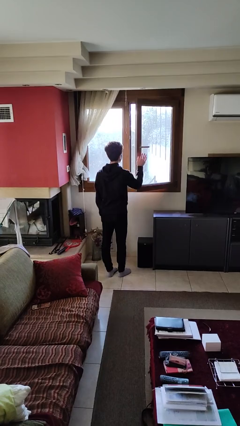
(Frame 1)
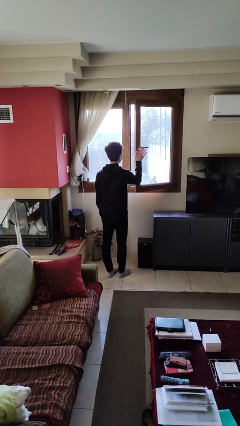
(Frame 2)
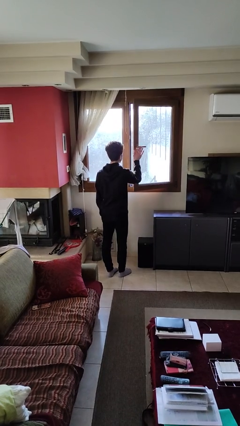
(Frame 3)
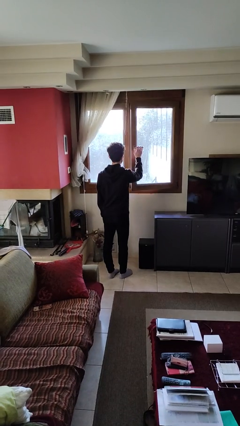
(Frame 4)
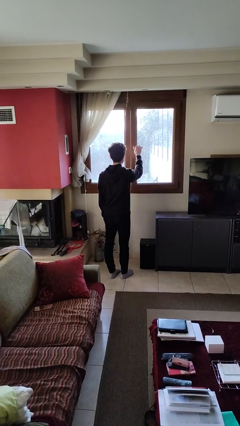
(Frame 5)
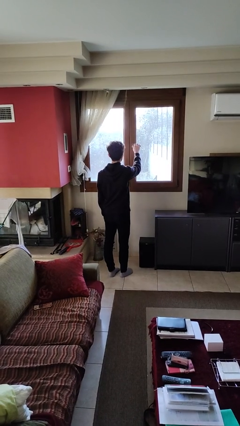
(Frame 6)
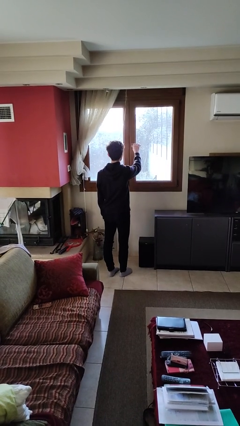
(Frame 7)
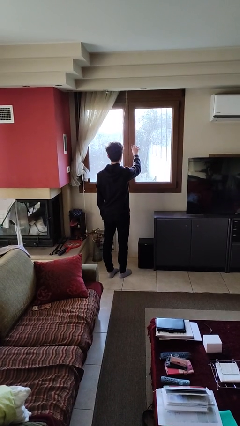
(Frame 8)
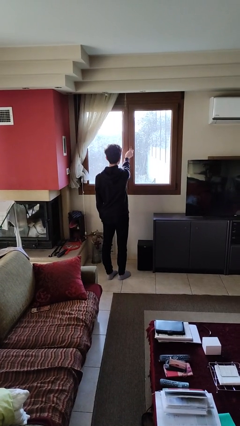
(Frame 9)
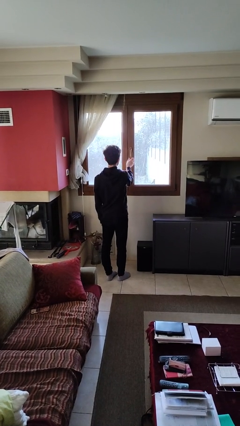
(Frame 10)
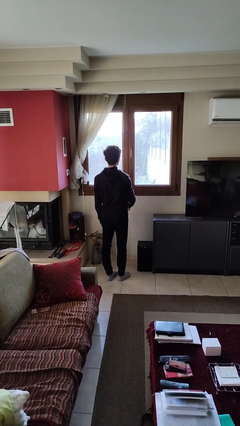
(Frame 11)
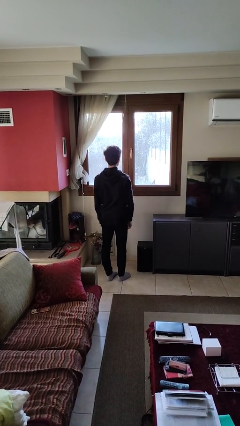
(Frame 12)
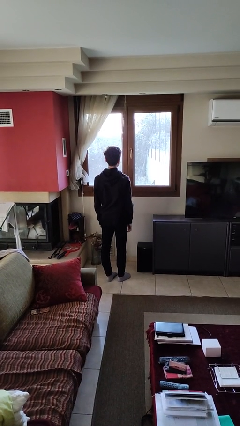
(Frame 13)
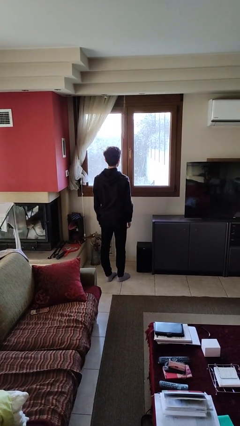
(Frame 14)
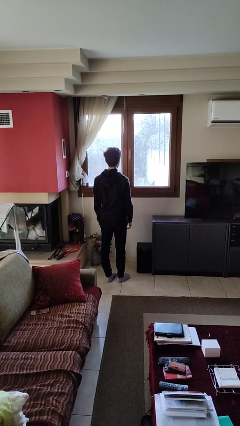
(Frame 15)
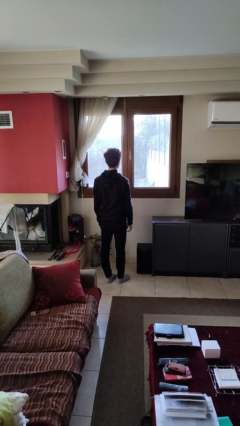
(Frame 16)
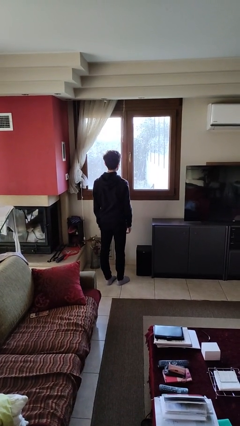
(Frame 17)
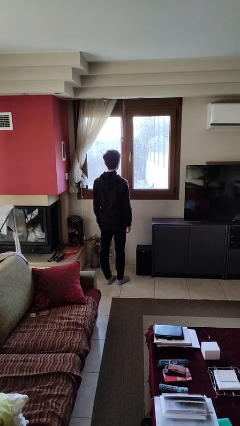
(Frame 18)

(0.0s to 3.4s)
person closes home window

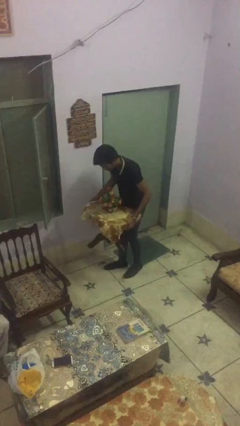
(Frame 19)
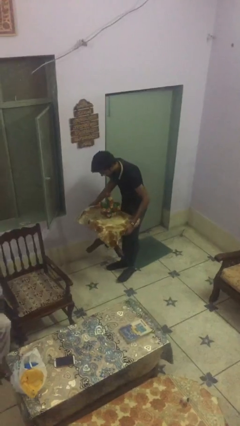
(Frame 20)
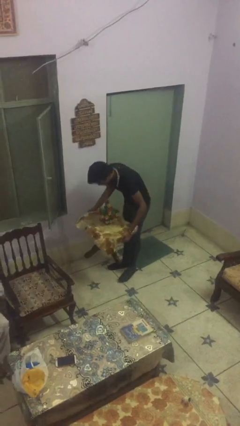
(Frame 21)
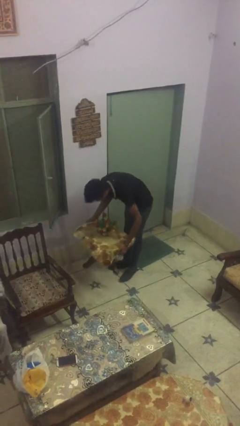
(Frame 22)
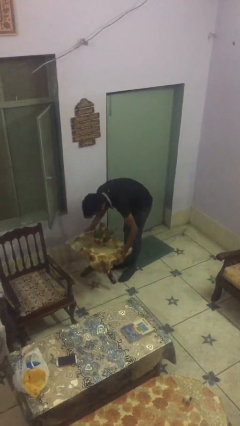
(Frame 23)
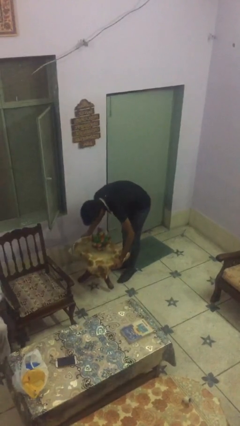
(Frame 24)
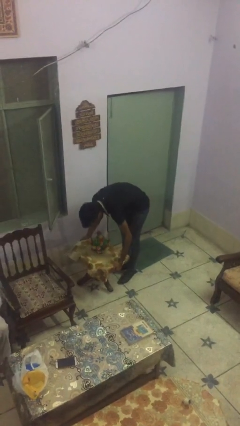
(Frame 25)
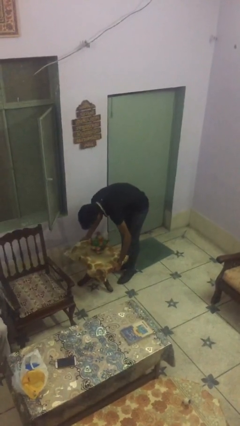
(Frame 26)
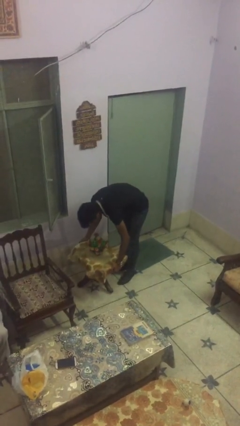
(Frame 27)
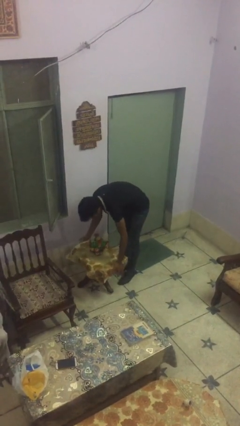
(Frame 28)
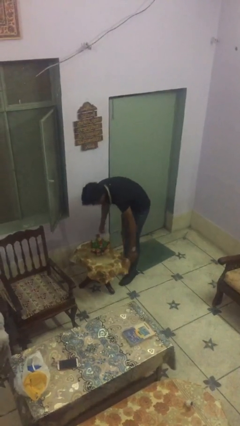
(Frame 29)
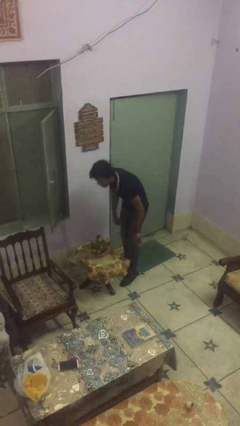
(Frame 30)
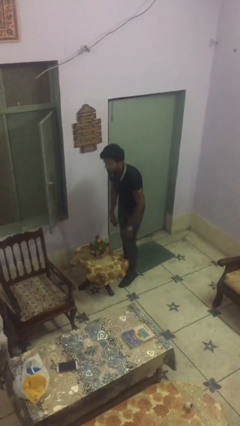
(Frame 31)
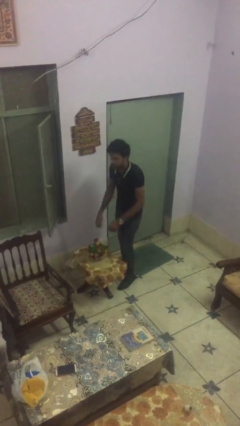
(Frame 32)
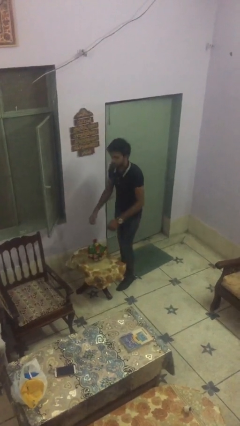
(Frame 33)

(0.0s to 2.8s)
person puts down object on floor

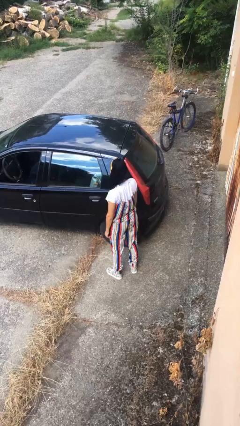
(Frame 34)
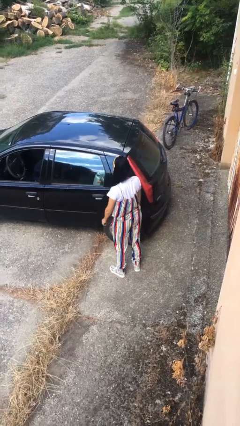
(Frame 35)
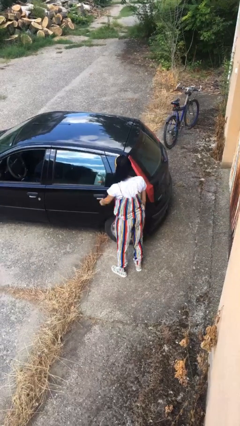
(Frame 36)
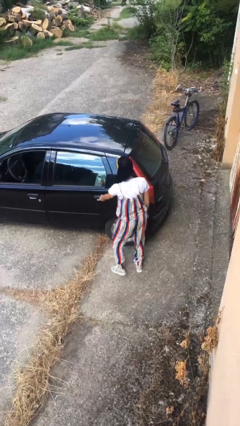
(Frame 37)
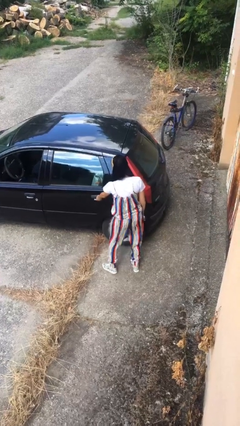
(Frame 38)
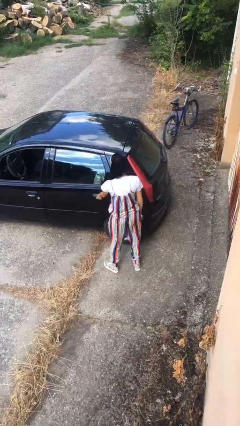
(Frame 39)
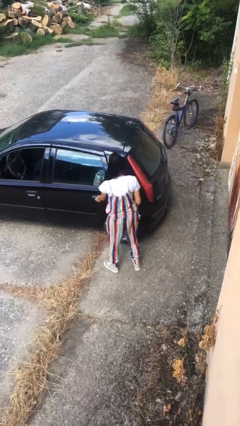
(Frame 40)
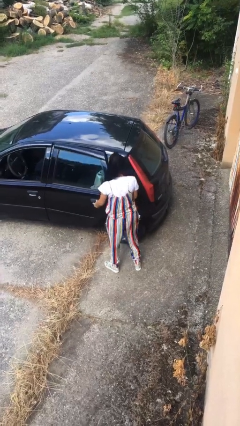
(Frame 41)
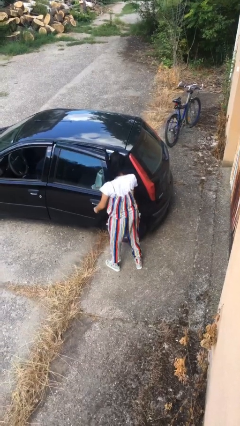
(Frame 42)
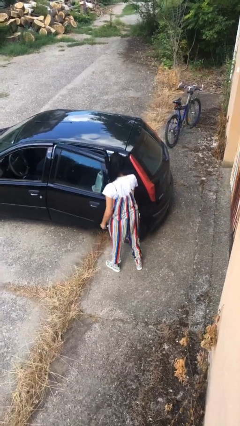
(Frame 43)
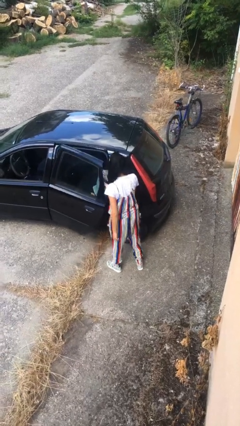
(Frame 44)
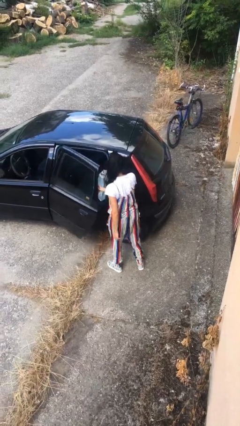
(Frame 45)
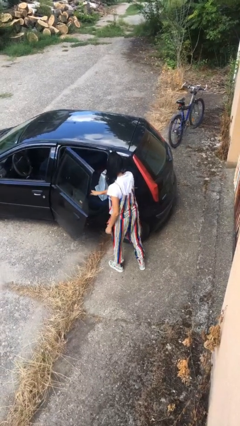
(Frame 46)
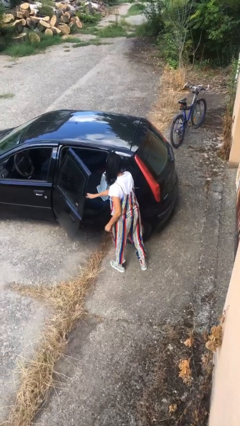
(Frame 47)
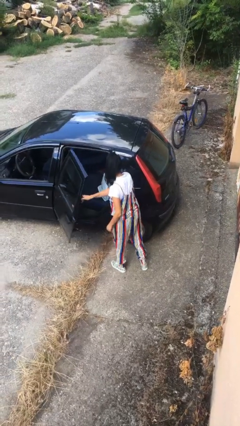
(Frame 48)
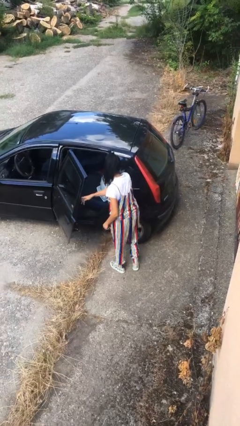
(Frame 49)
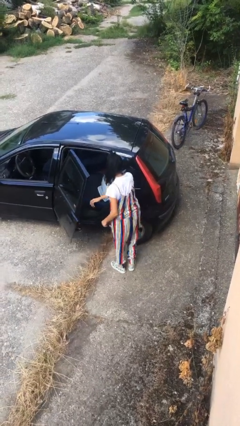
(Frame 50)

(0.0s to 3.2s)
person opens car door

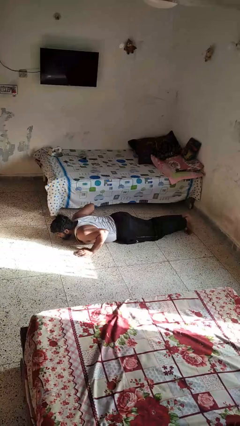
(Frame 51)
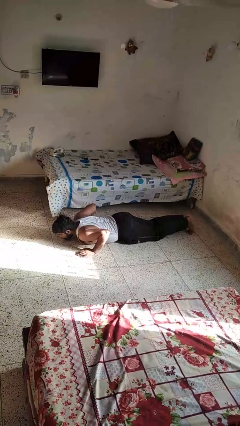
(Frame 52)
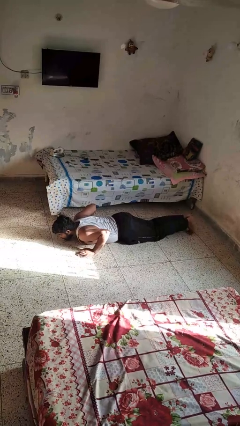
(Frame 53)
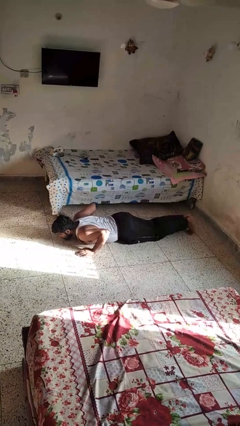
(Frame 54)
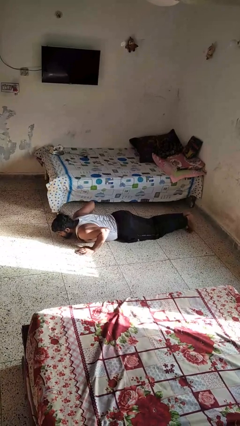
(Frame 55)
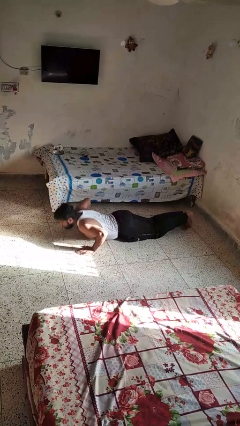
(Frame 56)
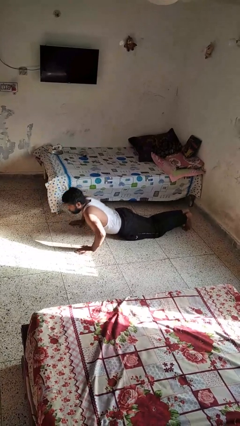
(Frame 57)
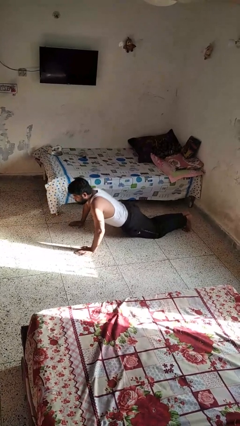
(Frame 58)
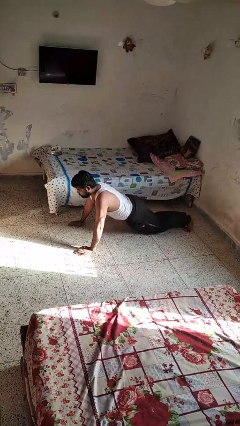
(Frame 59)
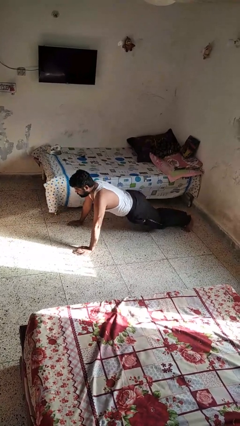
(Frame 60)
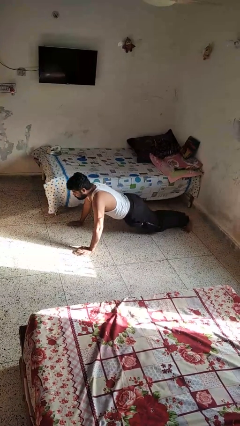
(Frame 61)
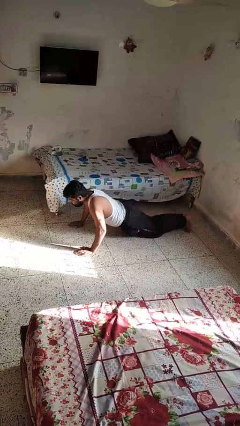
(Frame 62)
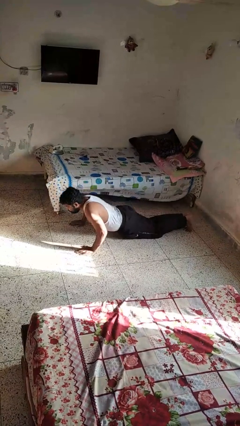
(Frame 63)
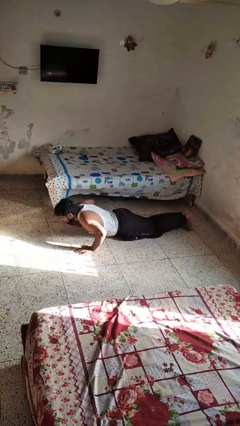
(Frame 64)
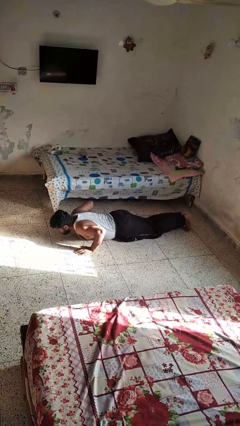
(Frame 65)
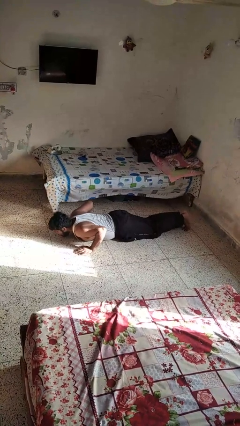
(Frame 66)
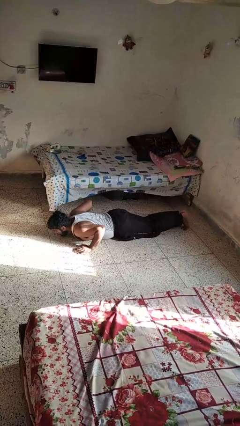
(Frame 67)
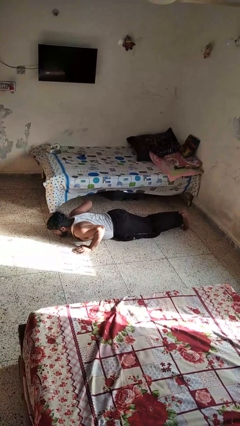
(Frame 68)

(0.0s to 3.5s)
person exercises with pushup

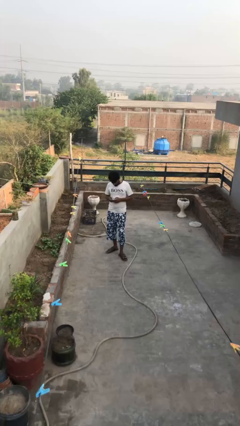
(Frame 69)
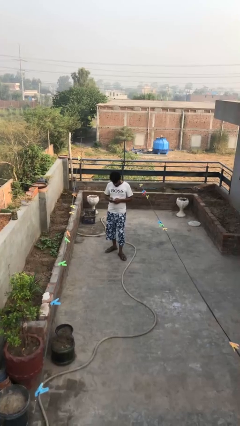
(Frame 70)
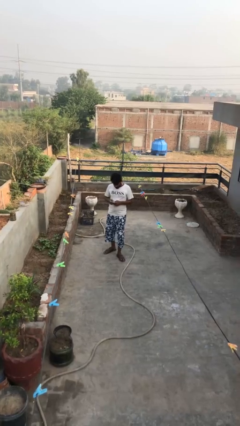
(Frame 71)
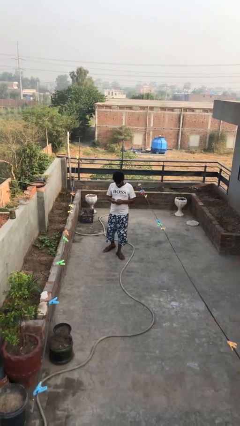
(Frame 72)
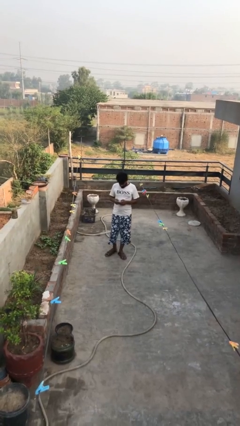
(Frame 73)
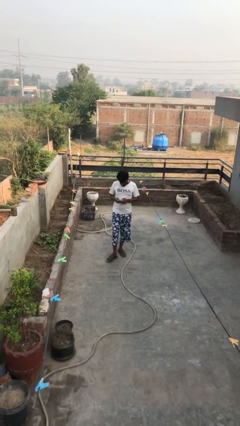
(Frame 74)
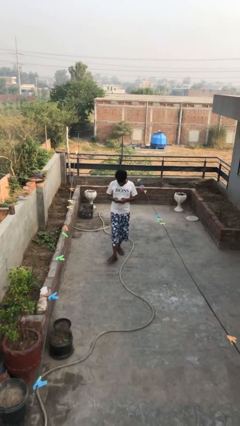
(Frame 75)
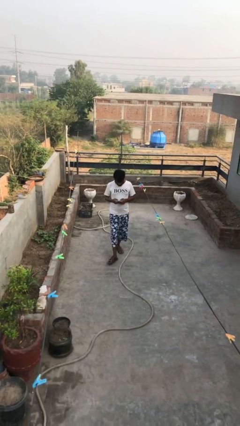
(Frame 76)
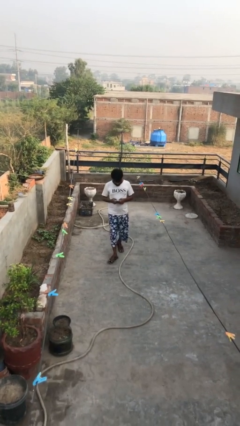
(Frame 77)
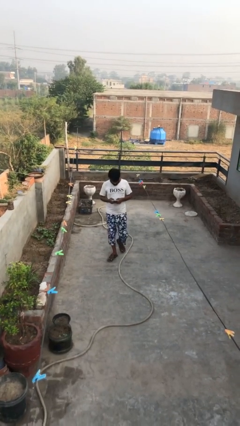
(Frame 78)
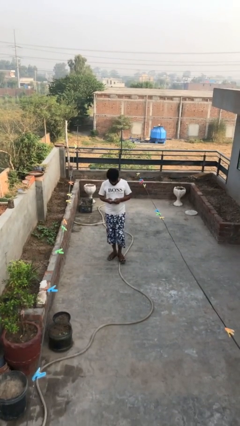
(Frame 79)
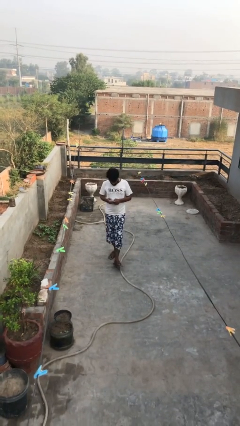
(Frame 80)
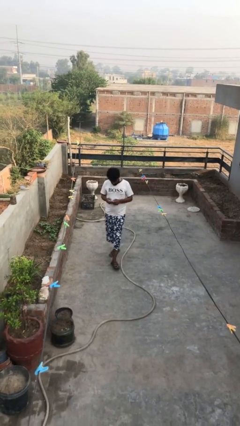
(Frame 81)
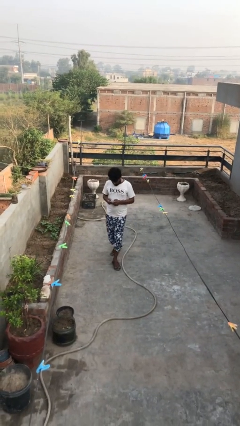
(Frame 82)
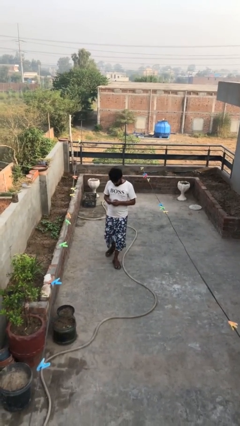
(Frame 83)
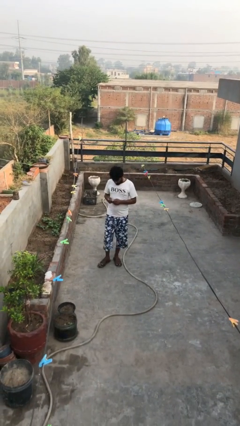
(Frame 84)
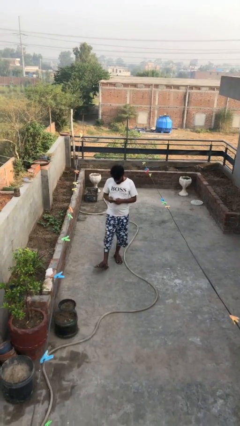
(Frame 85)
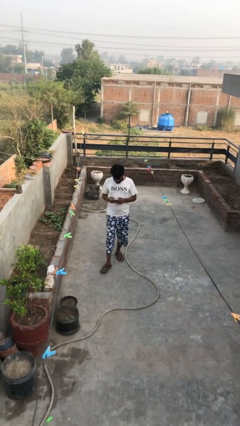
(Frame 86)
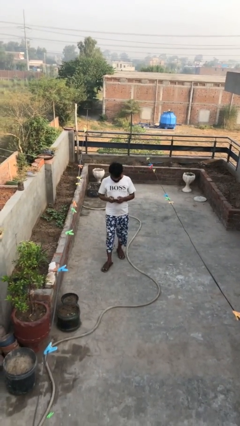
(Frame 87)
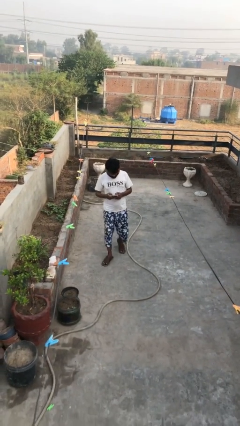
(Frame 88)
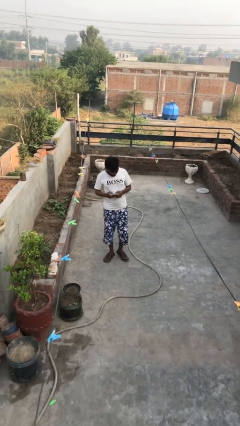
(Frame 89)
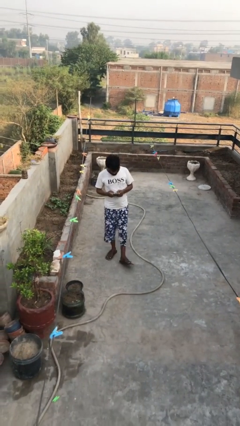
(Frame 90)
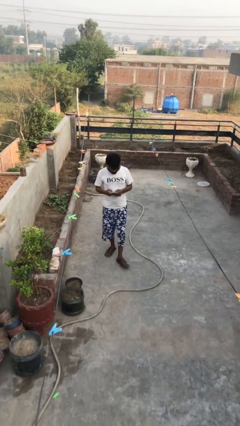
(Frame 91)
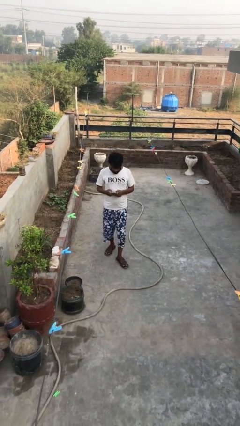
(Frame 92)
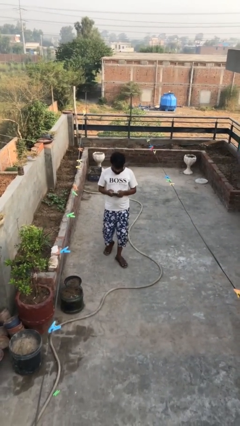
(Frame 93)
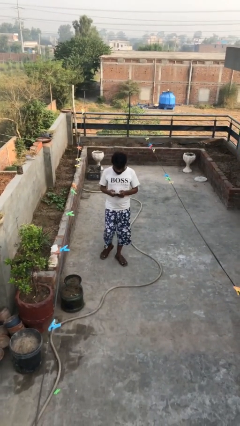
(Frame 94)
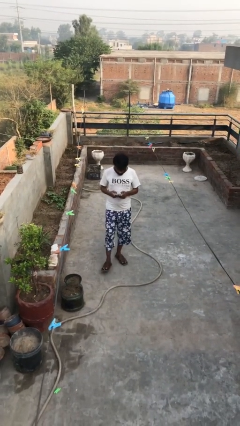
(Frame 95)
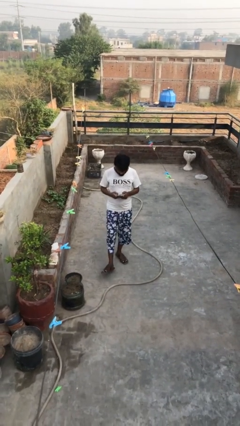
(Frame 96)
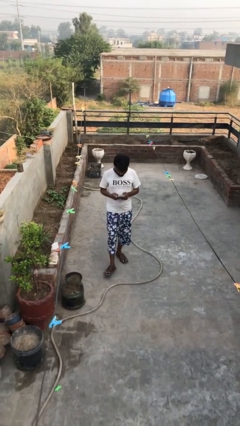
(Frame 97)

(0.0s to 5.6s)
person texts on phone
